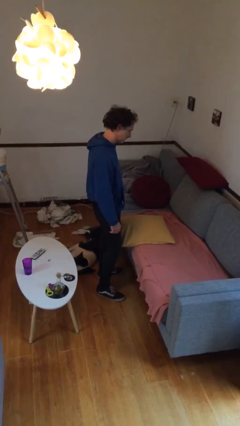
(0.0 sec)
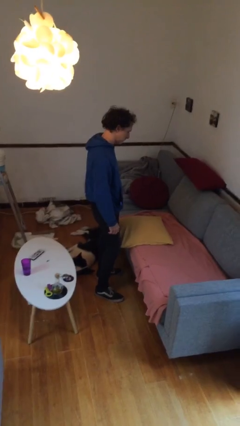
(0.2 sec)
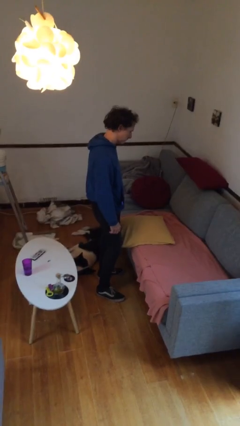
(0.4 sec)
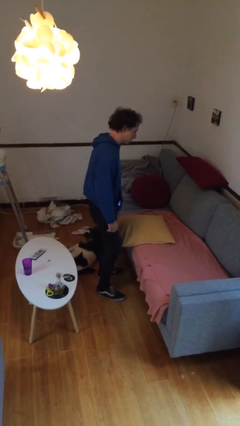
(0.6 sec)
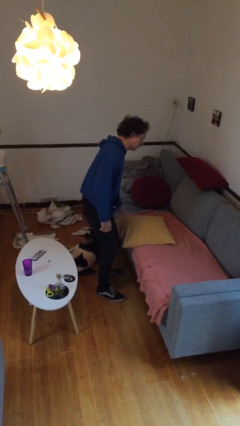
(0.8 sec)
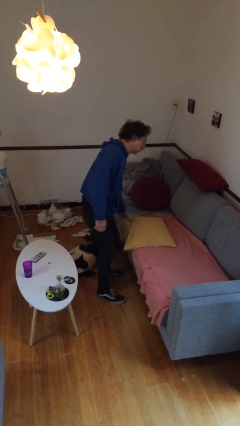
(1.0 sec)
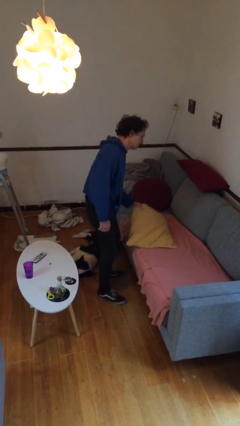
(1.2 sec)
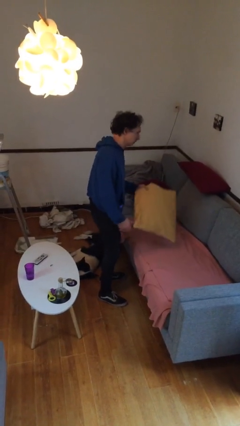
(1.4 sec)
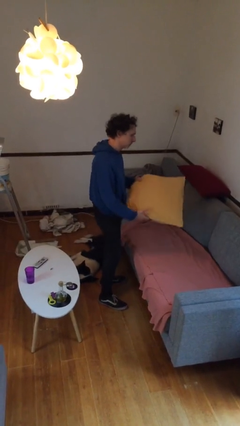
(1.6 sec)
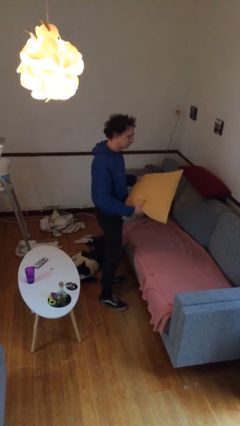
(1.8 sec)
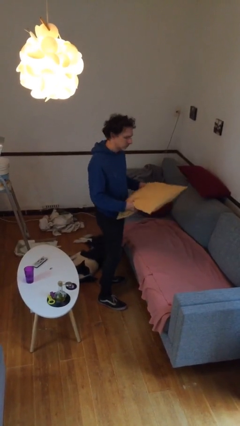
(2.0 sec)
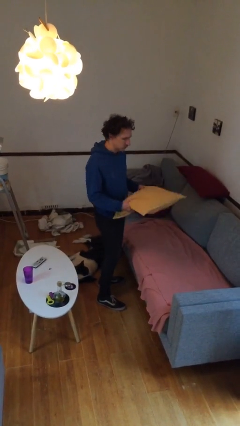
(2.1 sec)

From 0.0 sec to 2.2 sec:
person picks up object from couch

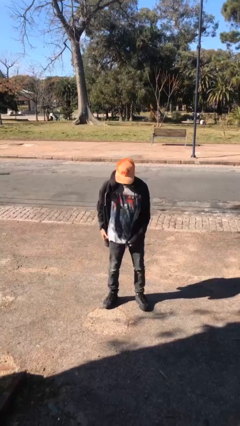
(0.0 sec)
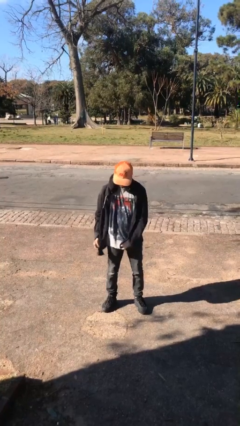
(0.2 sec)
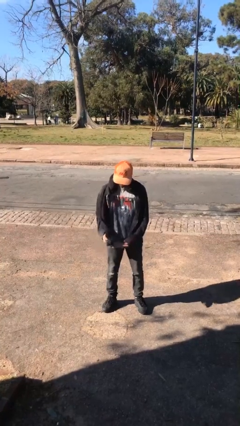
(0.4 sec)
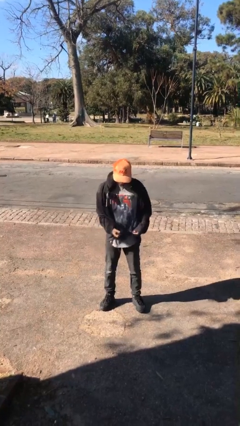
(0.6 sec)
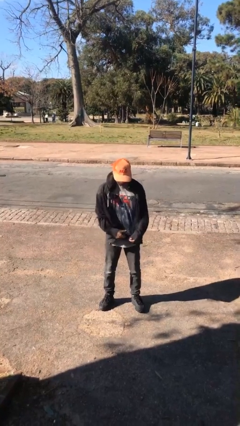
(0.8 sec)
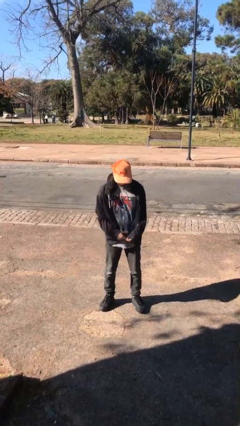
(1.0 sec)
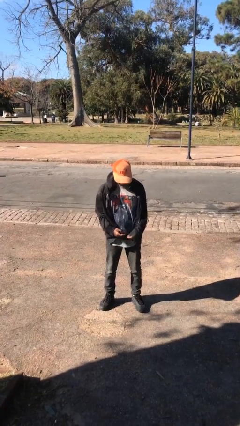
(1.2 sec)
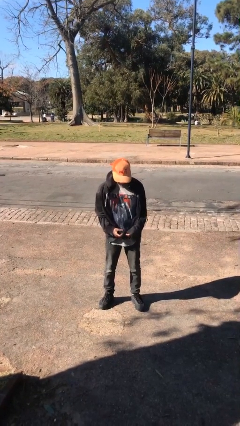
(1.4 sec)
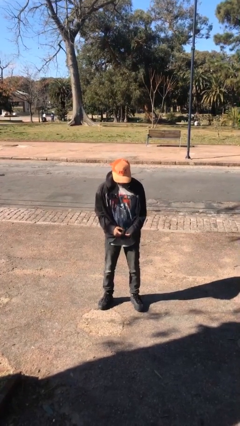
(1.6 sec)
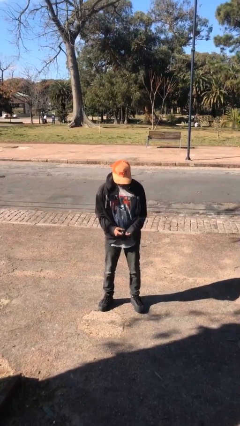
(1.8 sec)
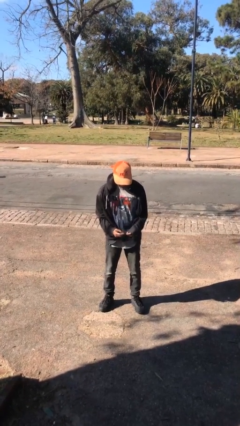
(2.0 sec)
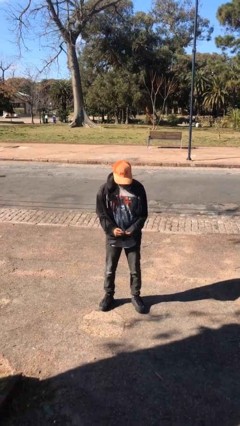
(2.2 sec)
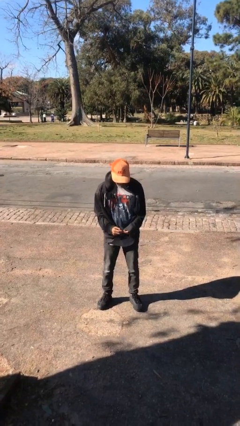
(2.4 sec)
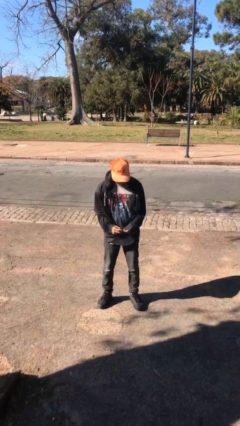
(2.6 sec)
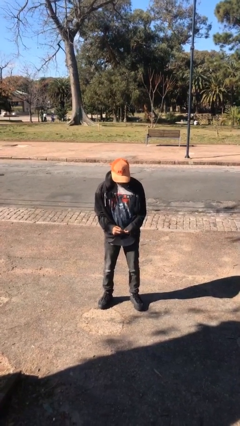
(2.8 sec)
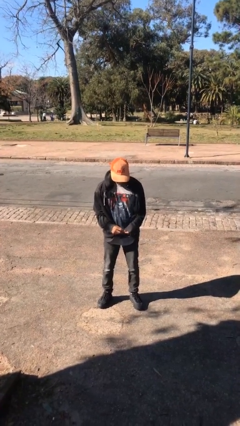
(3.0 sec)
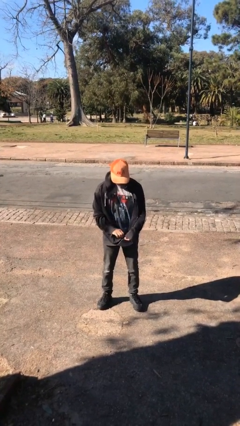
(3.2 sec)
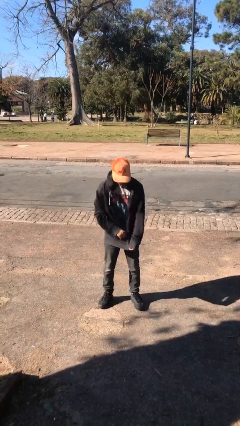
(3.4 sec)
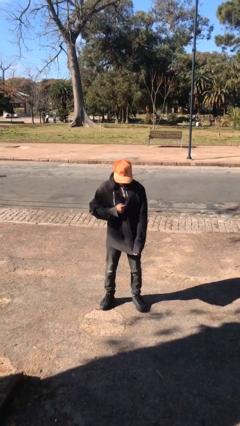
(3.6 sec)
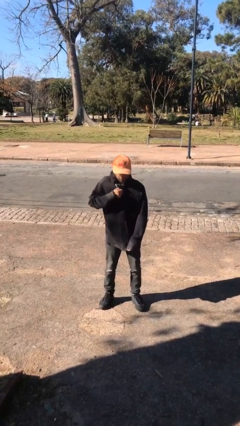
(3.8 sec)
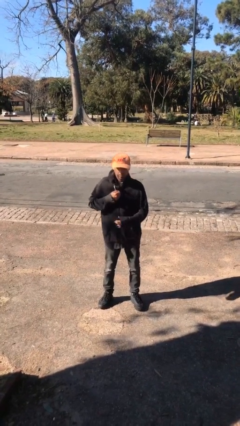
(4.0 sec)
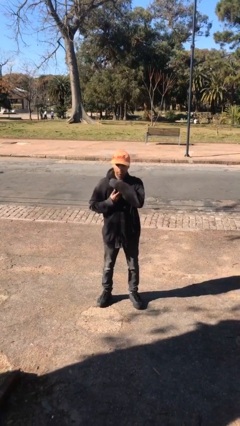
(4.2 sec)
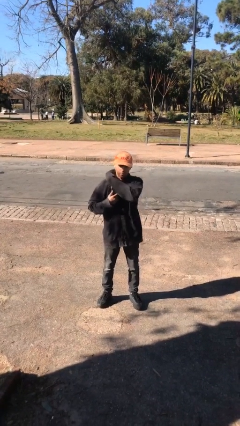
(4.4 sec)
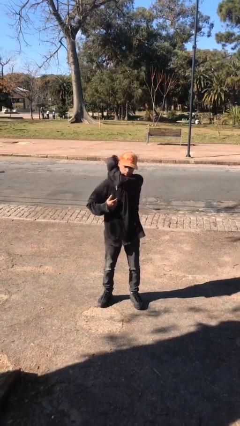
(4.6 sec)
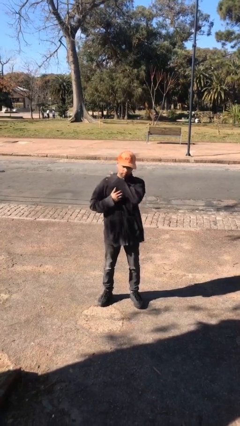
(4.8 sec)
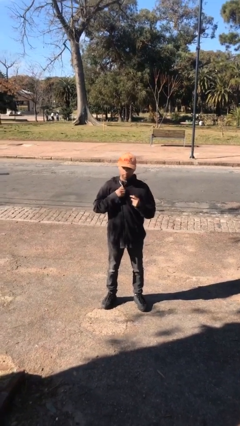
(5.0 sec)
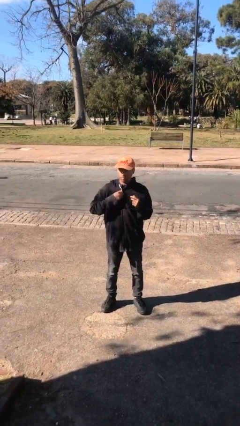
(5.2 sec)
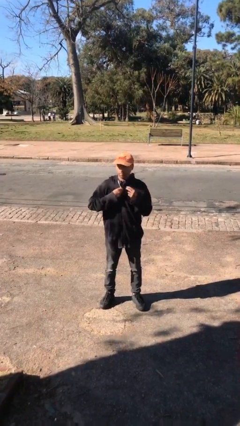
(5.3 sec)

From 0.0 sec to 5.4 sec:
person zips up jacket

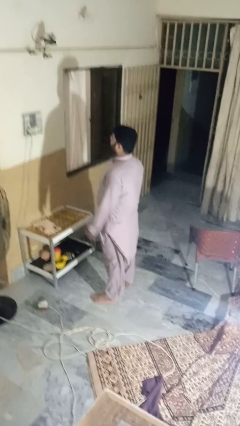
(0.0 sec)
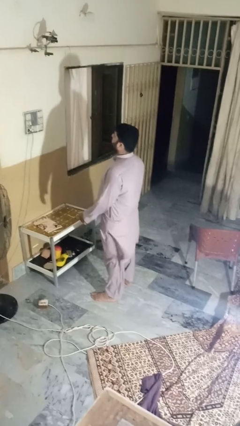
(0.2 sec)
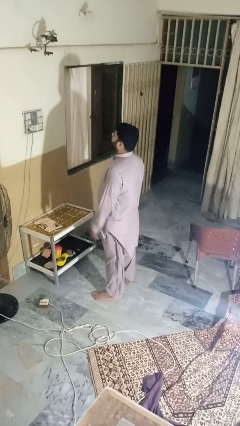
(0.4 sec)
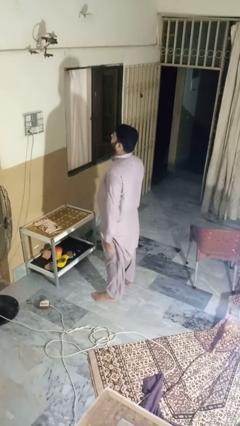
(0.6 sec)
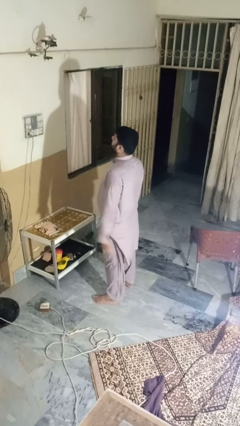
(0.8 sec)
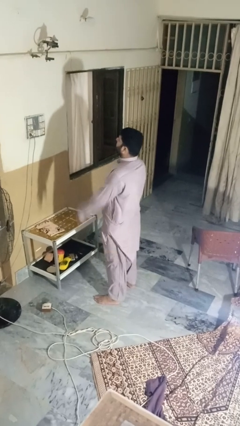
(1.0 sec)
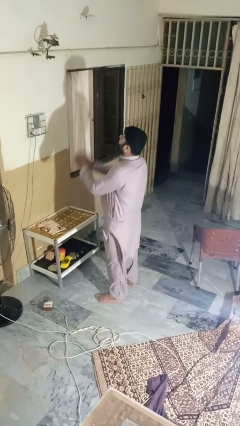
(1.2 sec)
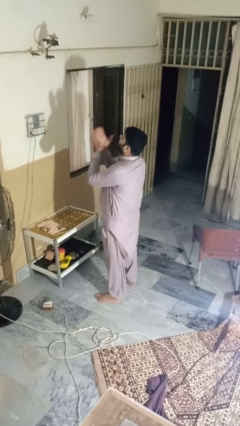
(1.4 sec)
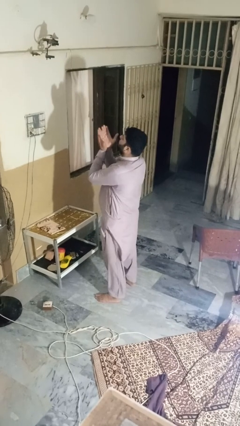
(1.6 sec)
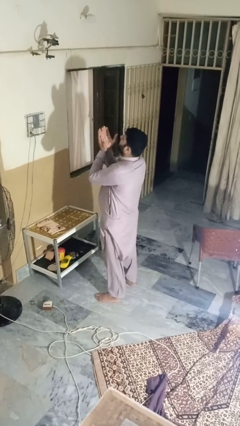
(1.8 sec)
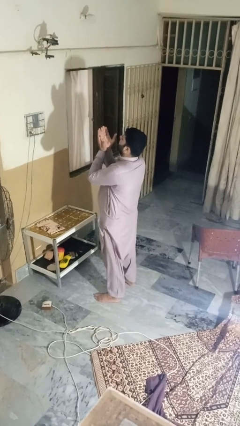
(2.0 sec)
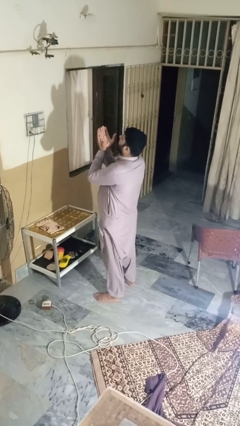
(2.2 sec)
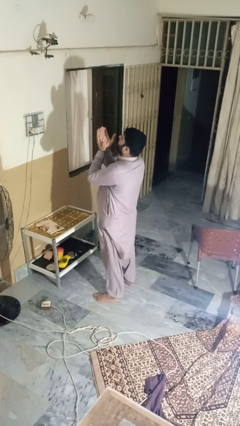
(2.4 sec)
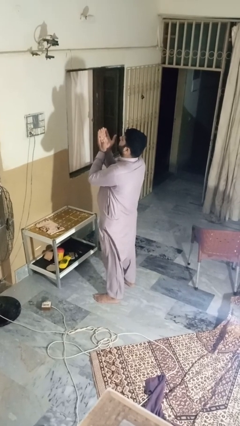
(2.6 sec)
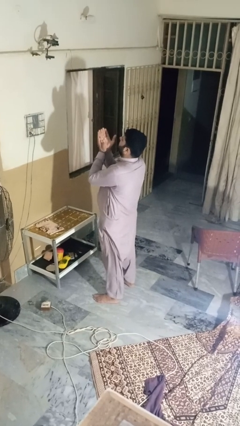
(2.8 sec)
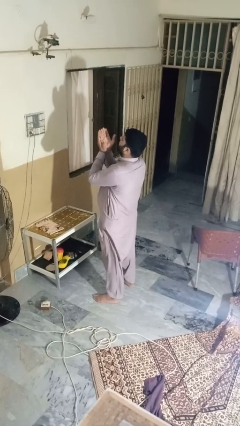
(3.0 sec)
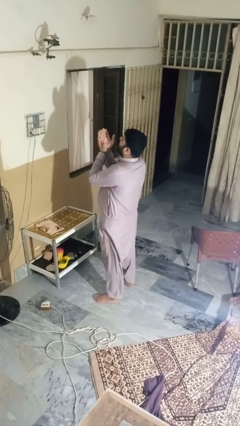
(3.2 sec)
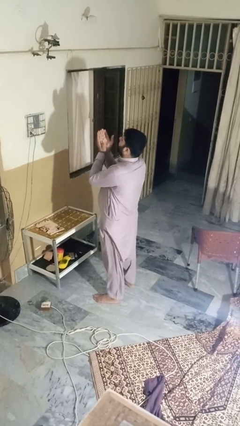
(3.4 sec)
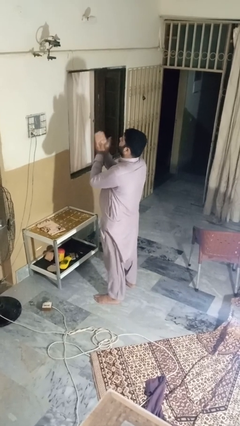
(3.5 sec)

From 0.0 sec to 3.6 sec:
person prays

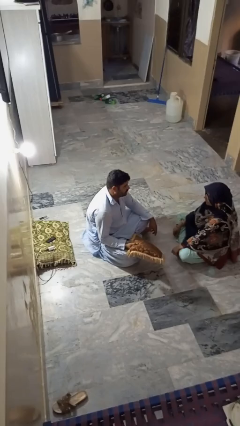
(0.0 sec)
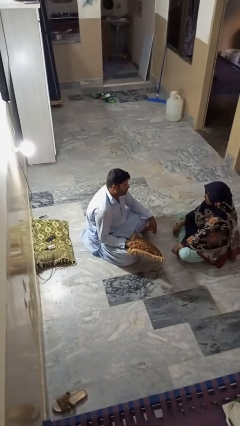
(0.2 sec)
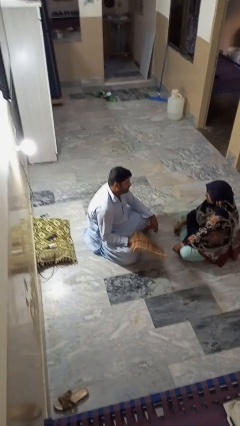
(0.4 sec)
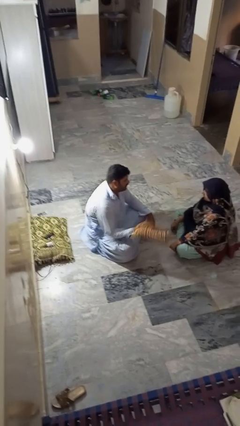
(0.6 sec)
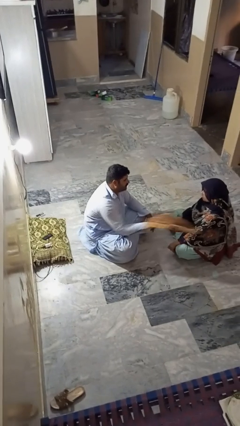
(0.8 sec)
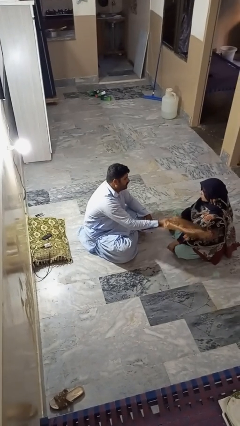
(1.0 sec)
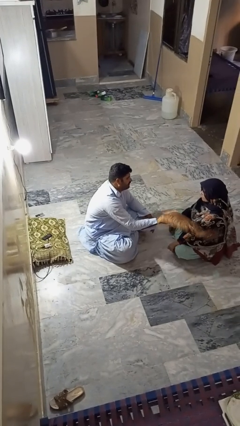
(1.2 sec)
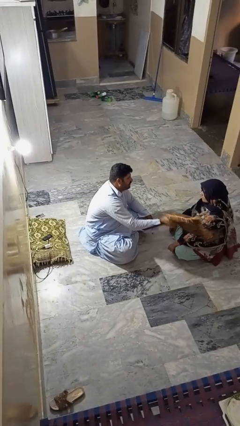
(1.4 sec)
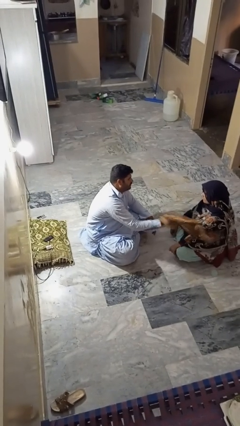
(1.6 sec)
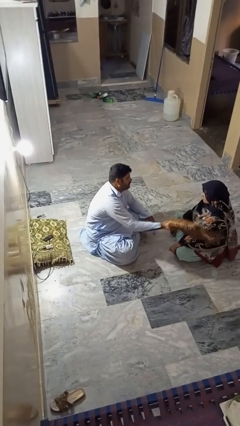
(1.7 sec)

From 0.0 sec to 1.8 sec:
person hits person with pillow

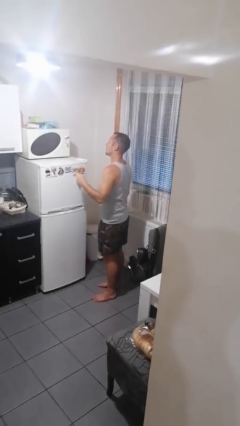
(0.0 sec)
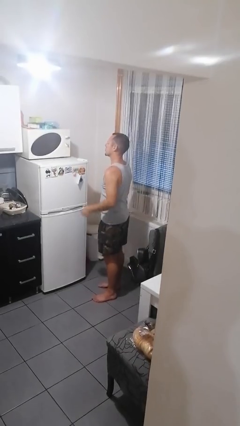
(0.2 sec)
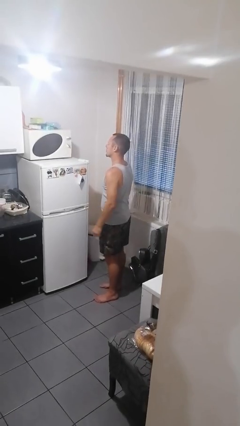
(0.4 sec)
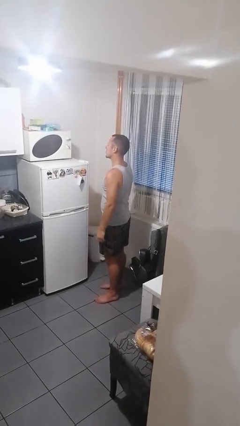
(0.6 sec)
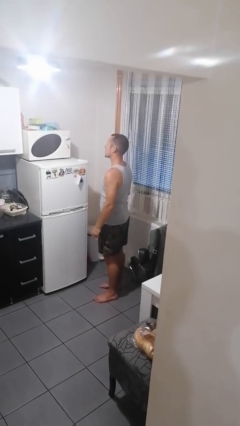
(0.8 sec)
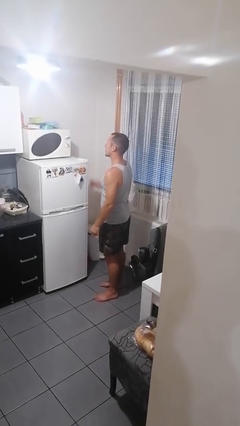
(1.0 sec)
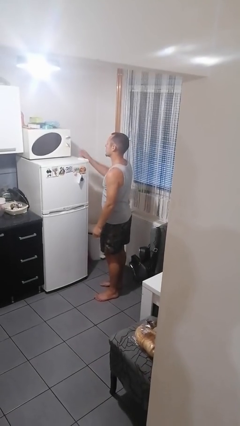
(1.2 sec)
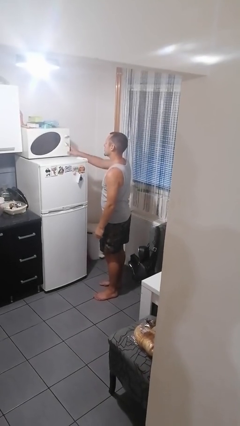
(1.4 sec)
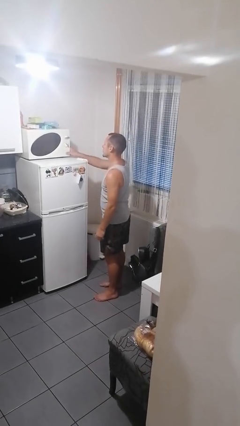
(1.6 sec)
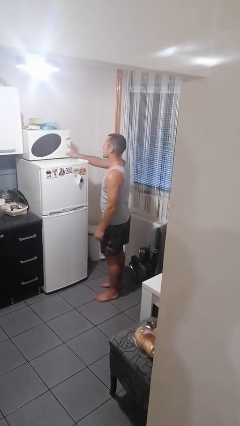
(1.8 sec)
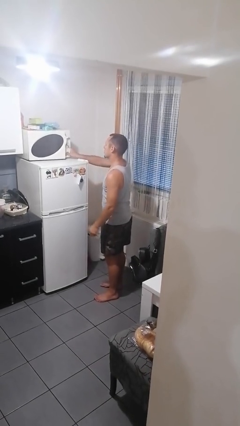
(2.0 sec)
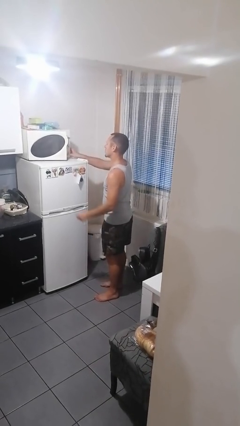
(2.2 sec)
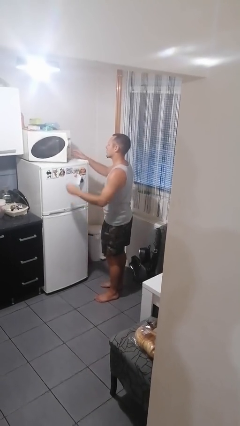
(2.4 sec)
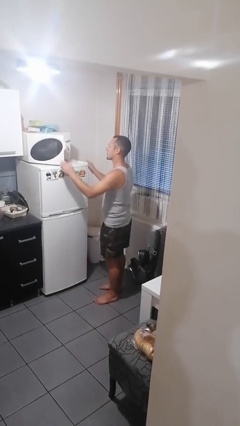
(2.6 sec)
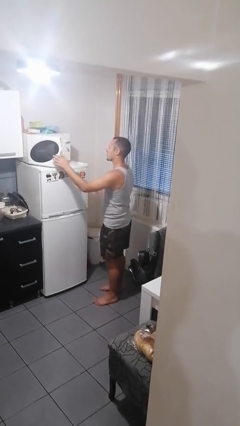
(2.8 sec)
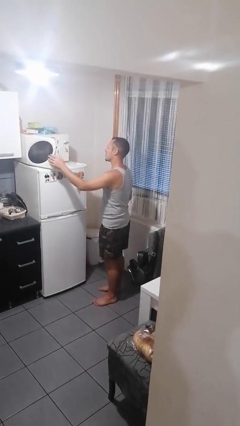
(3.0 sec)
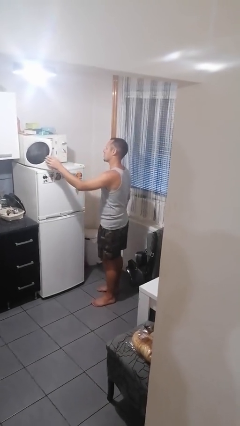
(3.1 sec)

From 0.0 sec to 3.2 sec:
person opens microwave

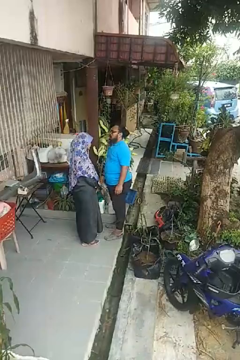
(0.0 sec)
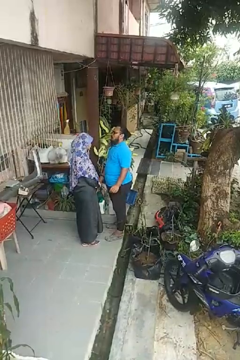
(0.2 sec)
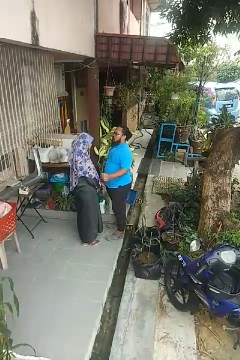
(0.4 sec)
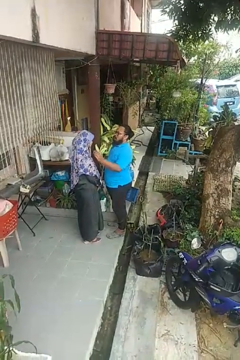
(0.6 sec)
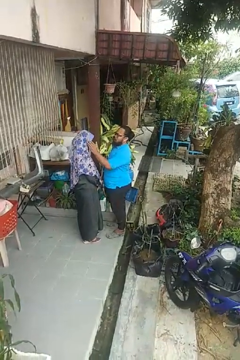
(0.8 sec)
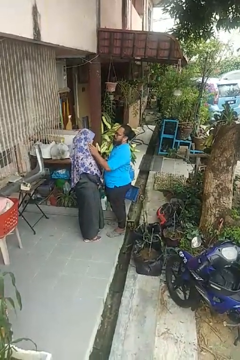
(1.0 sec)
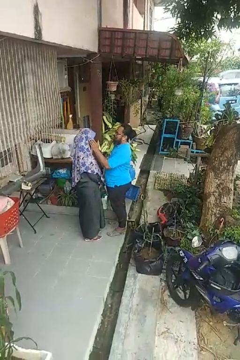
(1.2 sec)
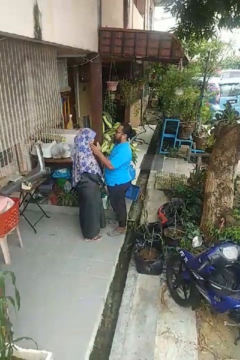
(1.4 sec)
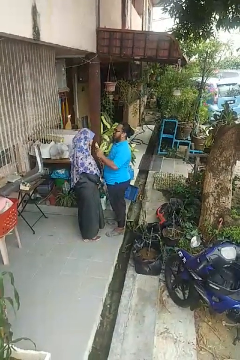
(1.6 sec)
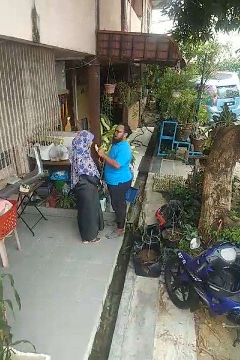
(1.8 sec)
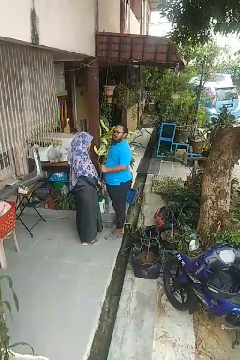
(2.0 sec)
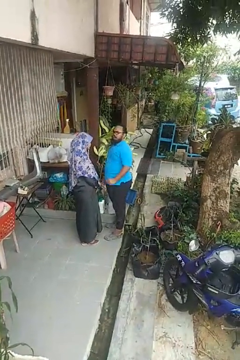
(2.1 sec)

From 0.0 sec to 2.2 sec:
person touches face of person
